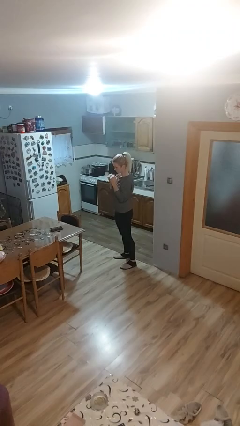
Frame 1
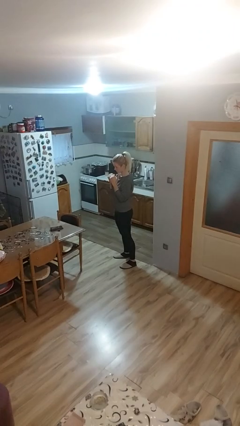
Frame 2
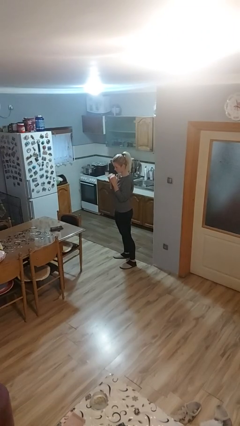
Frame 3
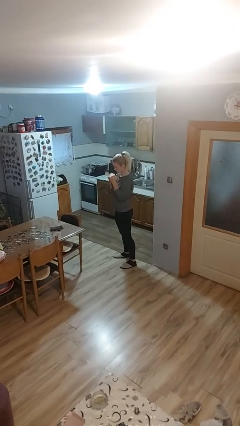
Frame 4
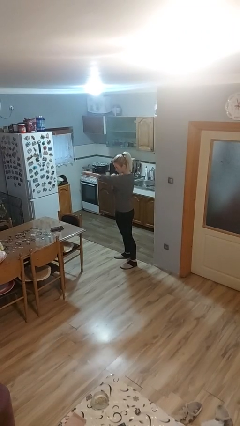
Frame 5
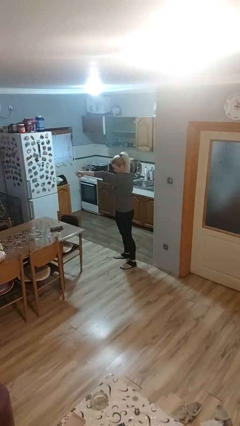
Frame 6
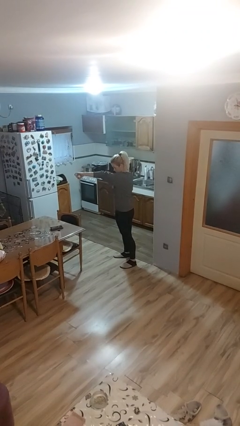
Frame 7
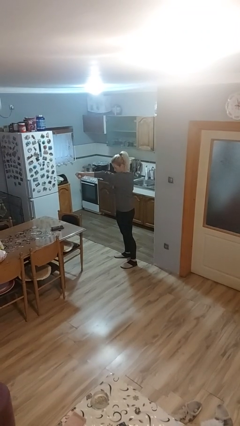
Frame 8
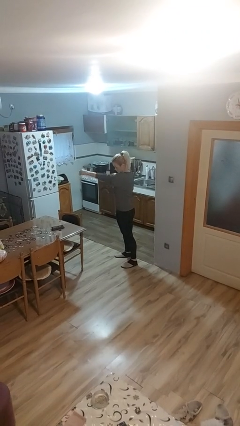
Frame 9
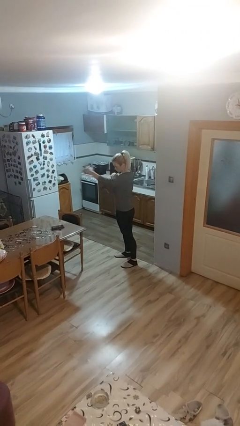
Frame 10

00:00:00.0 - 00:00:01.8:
person punches

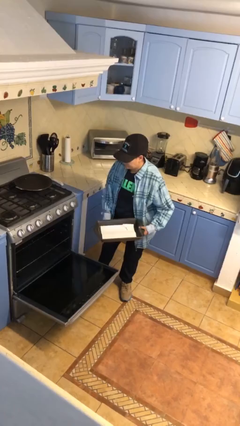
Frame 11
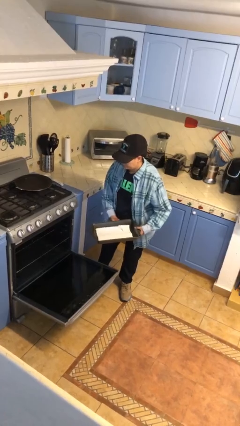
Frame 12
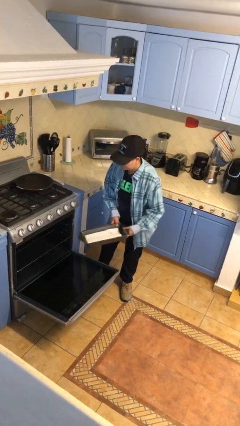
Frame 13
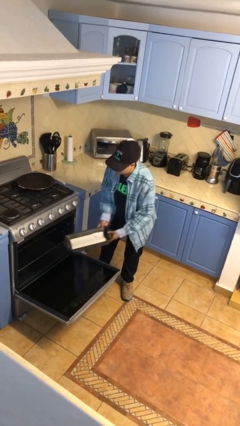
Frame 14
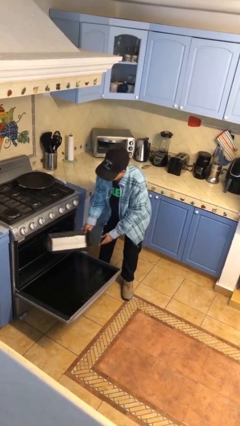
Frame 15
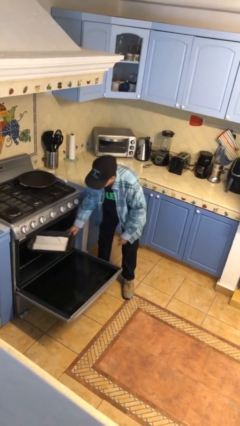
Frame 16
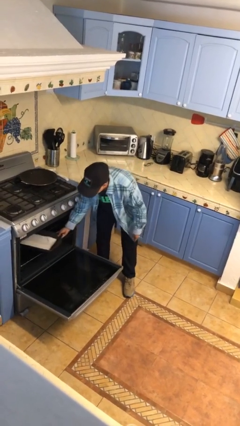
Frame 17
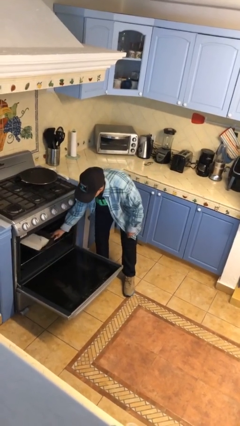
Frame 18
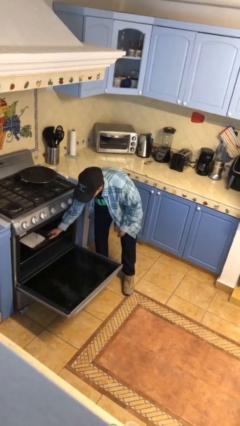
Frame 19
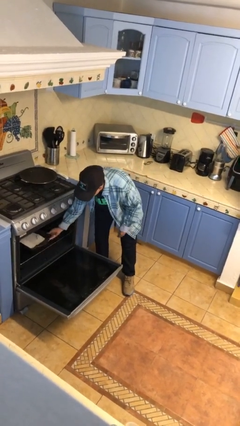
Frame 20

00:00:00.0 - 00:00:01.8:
person puts object into oven

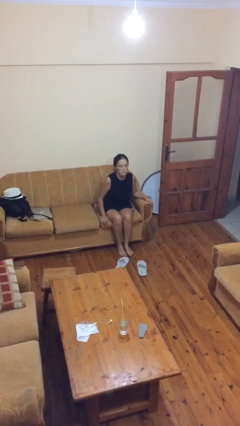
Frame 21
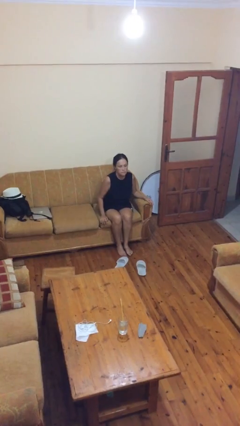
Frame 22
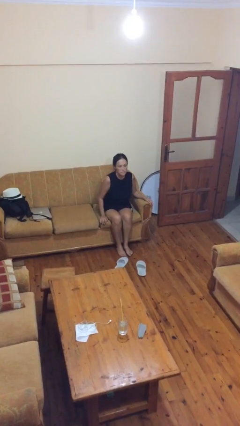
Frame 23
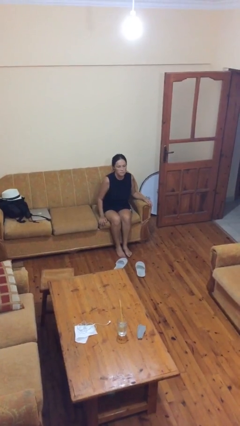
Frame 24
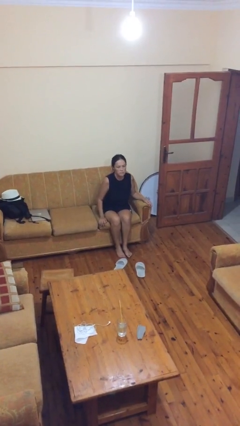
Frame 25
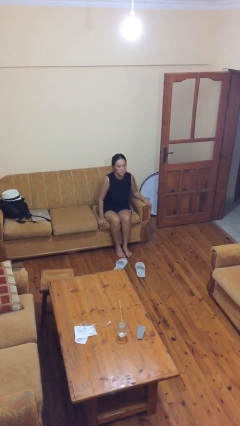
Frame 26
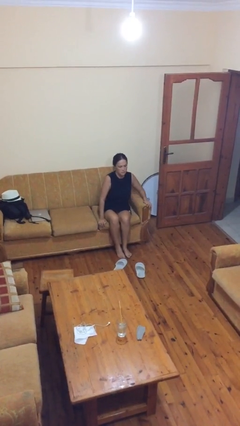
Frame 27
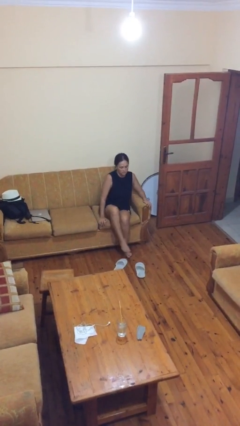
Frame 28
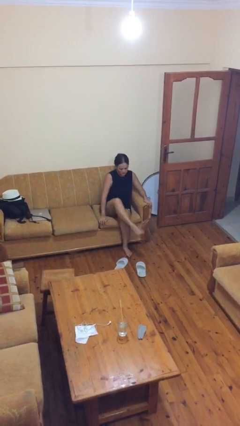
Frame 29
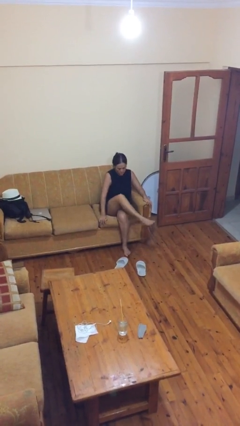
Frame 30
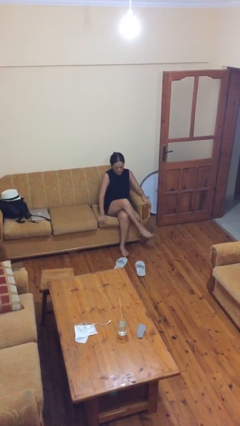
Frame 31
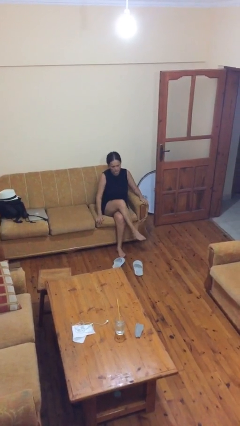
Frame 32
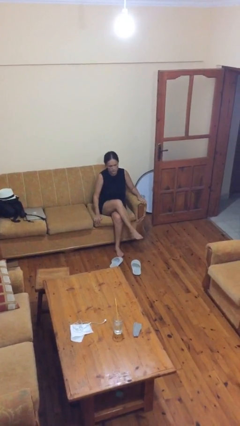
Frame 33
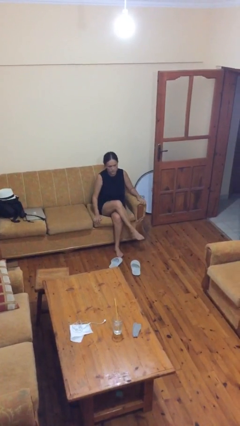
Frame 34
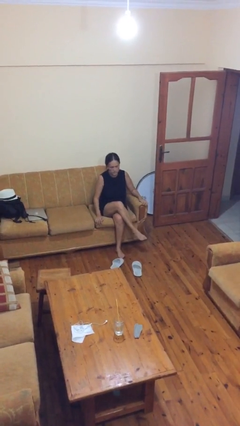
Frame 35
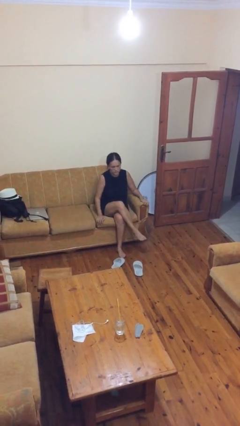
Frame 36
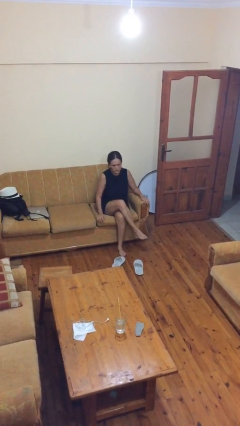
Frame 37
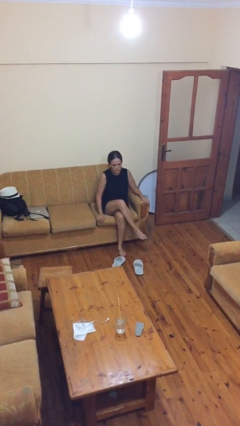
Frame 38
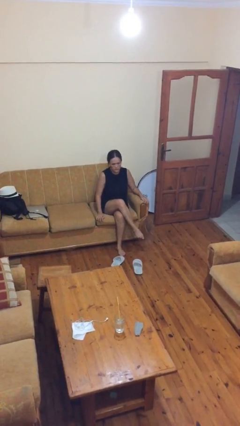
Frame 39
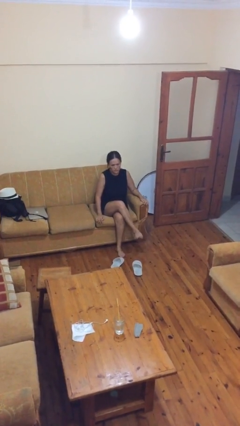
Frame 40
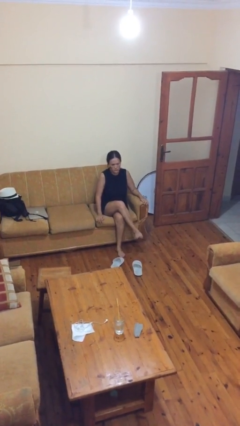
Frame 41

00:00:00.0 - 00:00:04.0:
person crosses legs

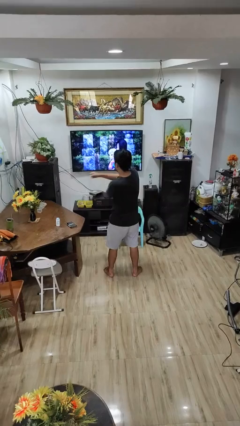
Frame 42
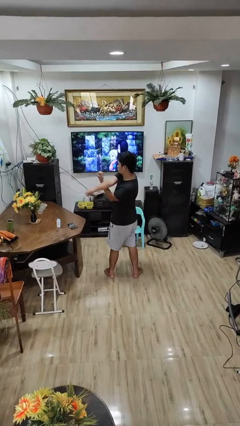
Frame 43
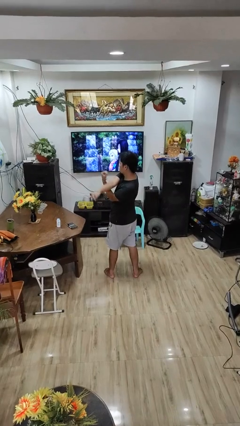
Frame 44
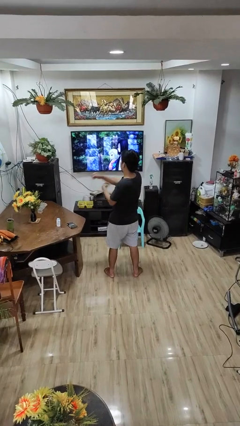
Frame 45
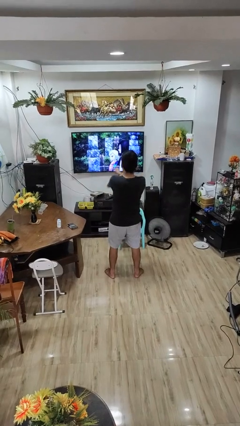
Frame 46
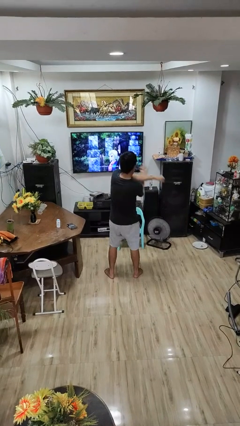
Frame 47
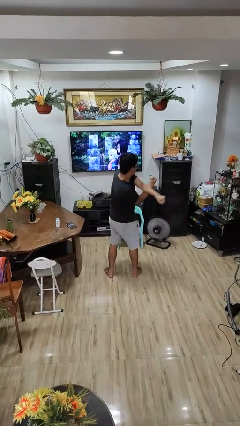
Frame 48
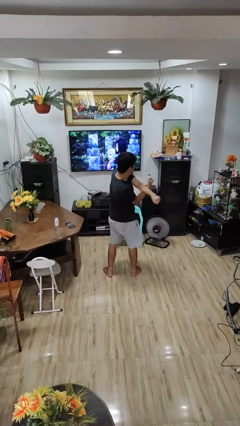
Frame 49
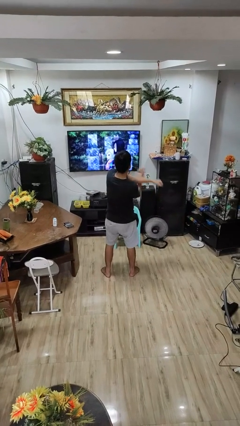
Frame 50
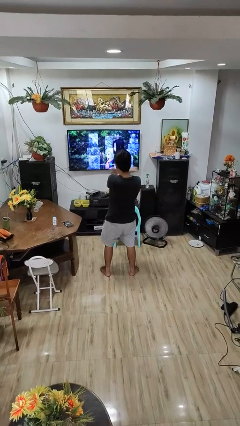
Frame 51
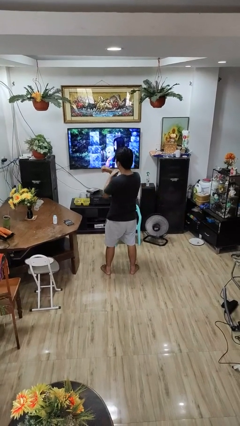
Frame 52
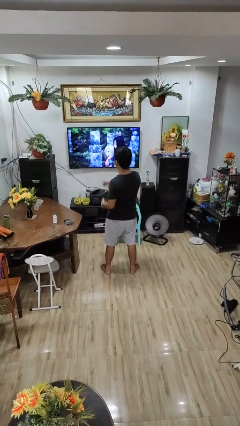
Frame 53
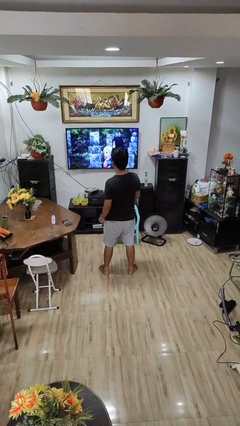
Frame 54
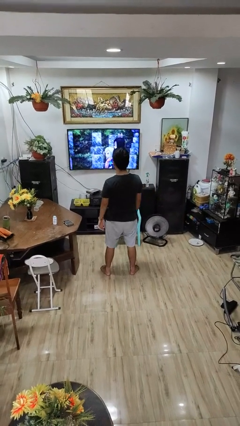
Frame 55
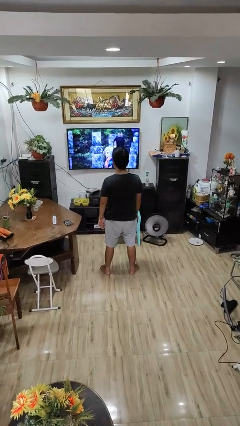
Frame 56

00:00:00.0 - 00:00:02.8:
person stretches arms to side

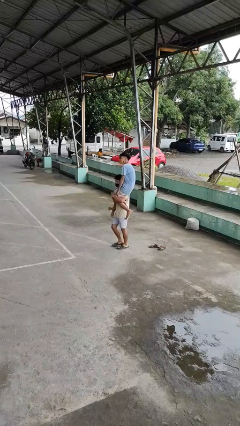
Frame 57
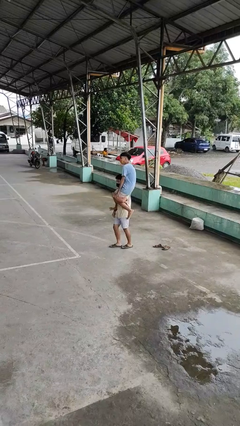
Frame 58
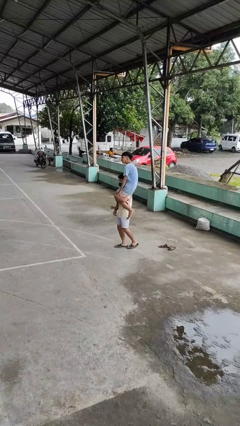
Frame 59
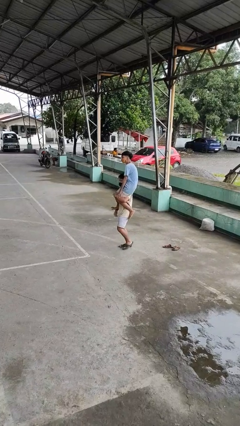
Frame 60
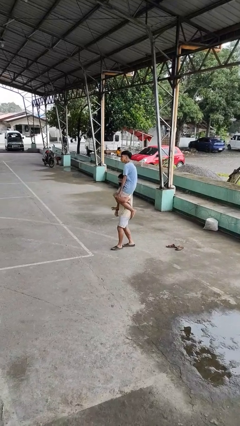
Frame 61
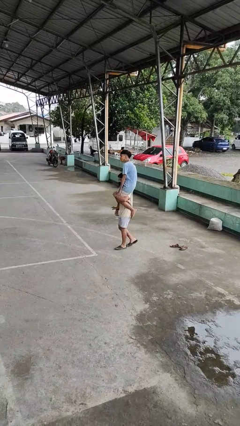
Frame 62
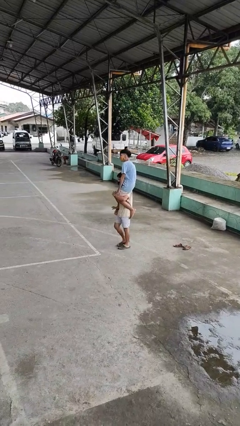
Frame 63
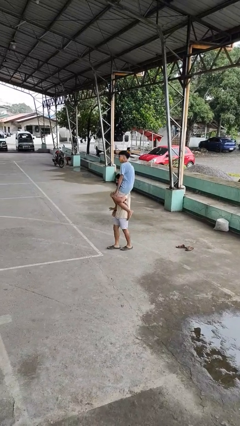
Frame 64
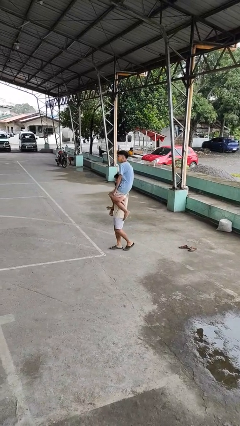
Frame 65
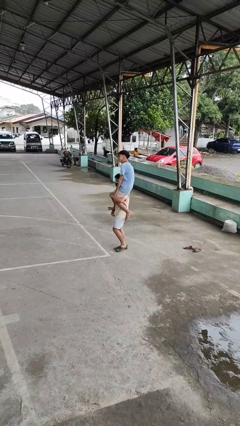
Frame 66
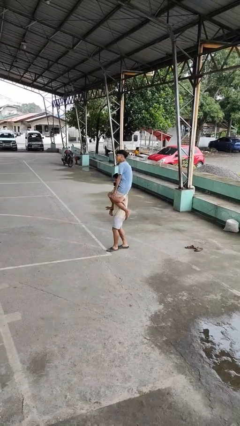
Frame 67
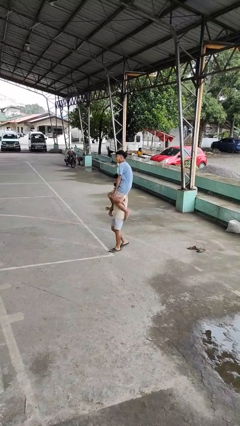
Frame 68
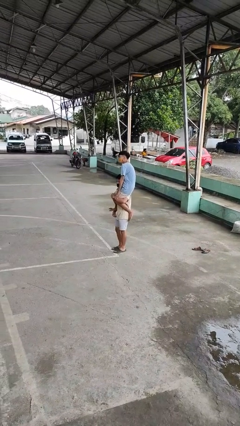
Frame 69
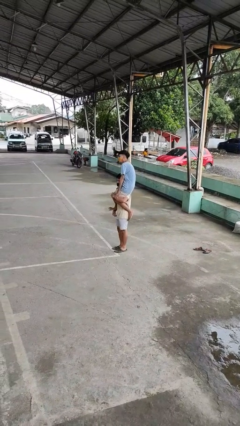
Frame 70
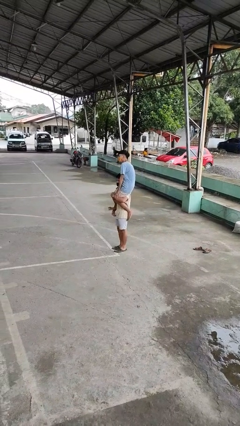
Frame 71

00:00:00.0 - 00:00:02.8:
person carries person on shoulders

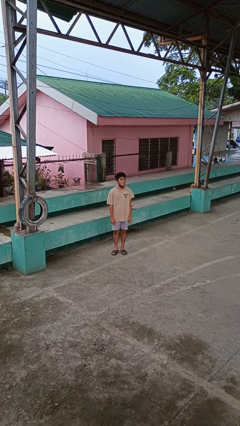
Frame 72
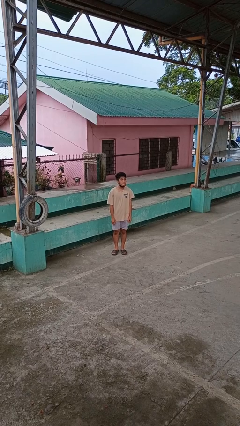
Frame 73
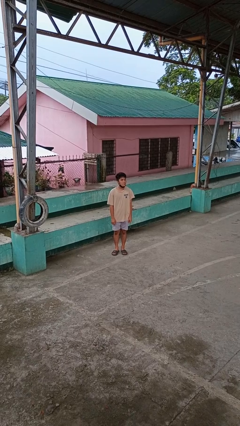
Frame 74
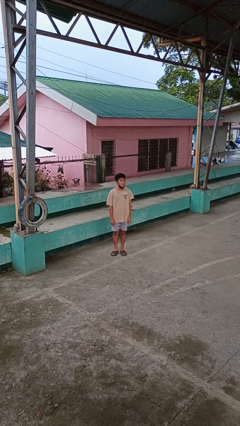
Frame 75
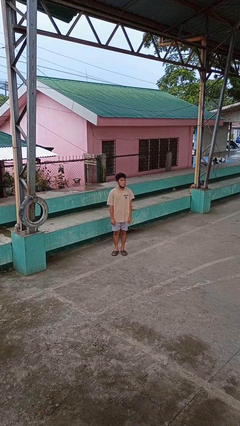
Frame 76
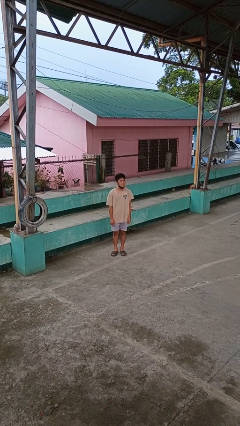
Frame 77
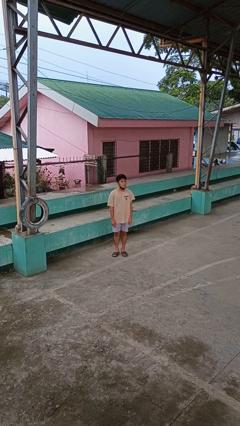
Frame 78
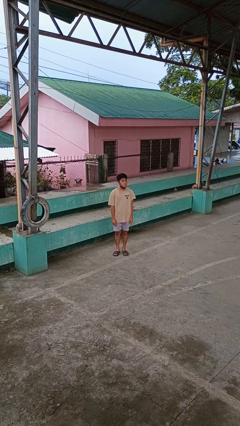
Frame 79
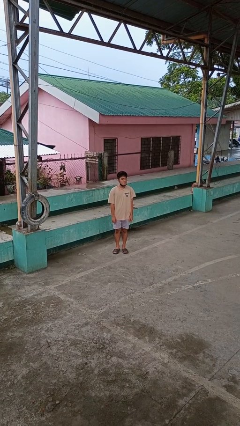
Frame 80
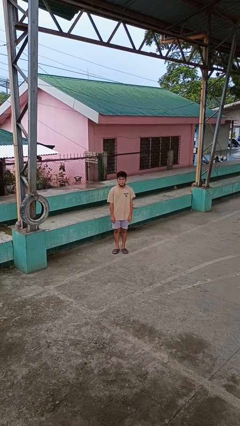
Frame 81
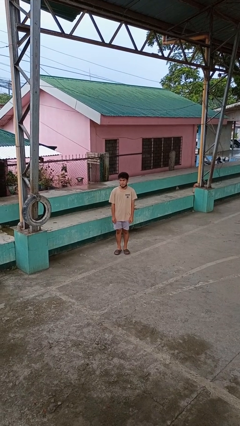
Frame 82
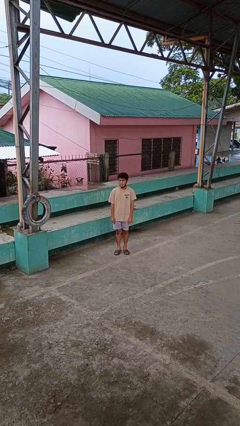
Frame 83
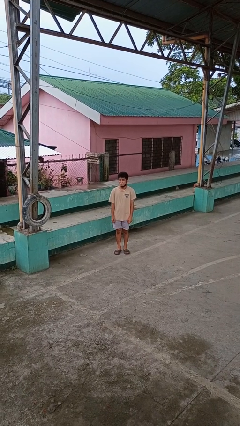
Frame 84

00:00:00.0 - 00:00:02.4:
person sticks out tongue

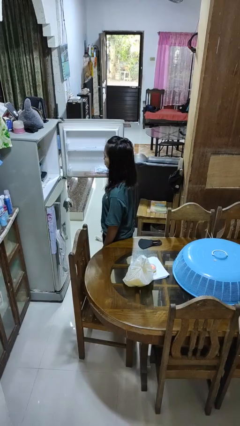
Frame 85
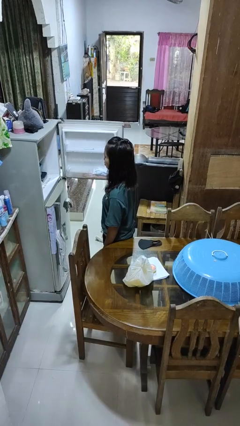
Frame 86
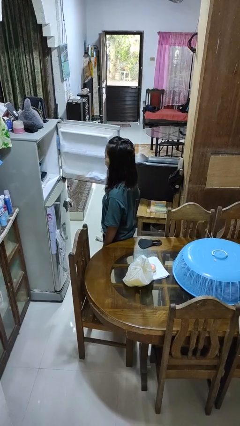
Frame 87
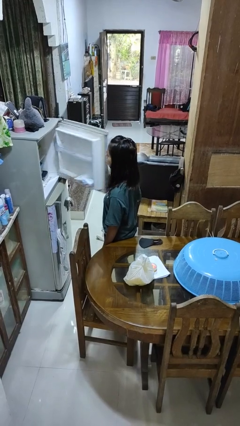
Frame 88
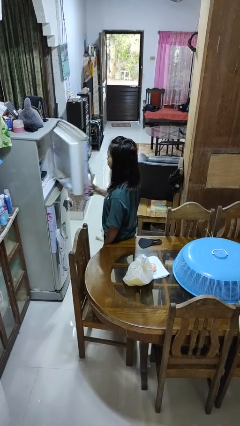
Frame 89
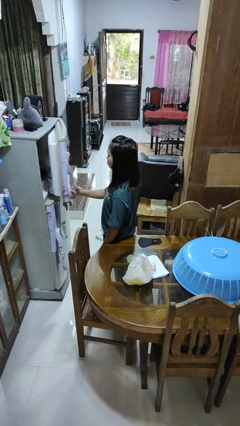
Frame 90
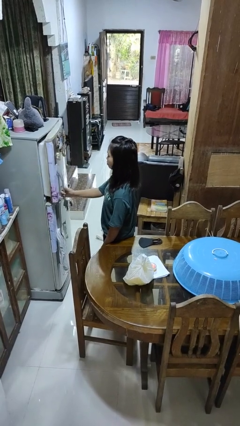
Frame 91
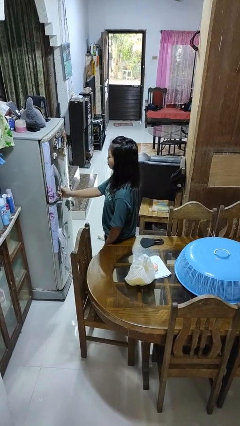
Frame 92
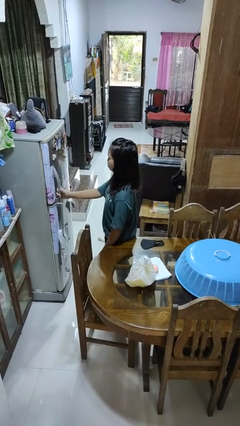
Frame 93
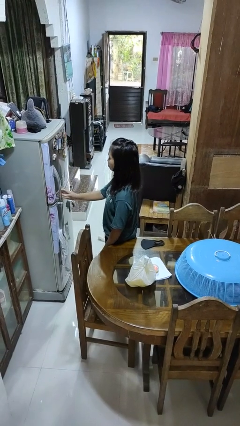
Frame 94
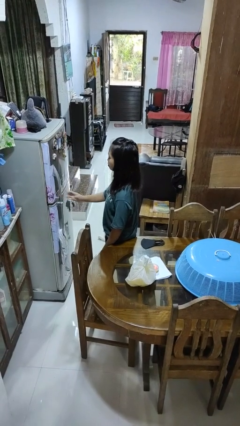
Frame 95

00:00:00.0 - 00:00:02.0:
person closes refrigerator
